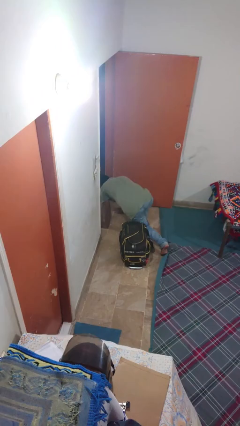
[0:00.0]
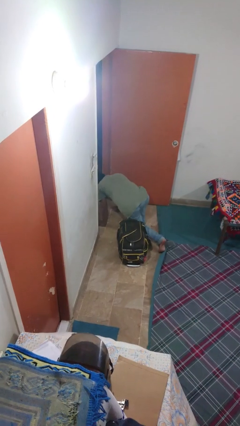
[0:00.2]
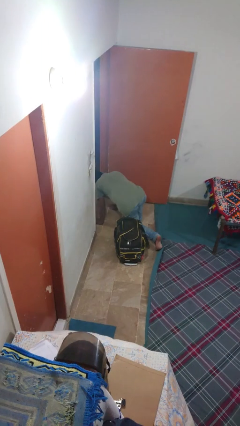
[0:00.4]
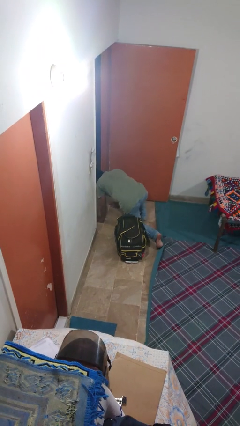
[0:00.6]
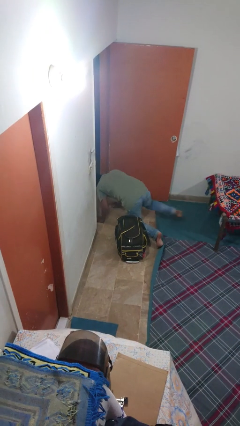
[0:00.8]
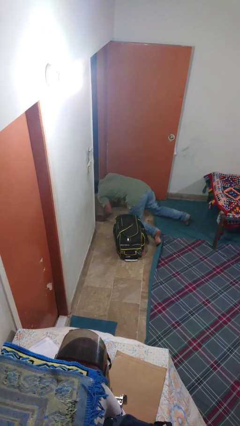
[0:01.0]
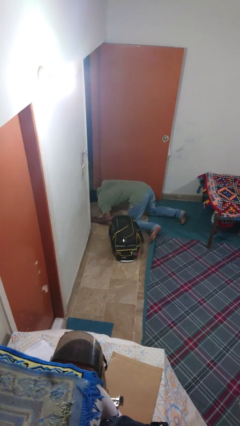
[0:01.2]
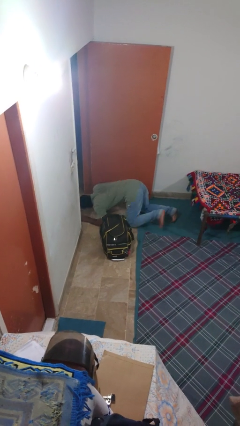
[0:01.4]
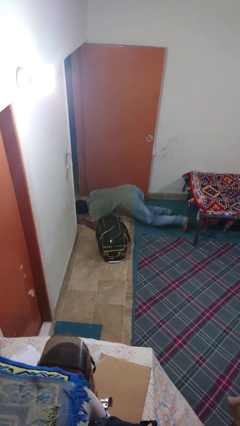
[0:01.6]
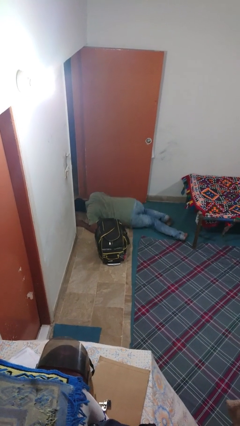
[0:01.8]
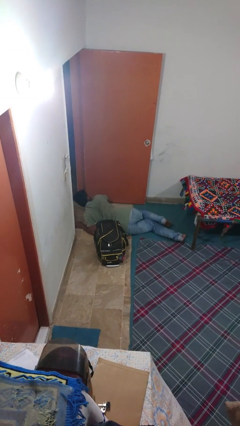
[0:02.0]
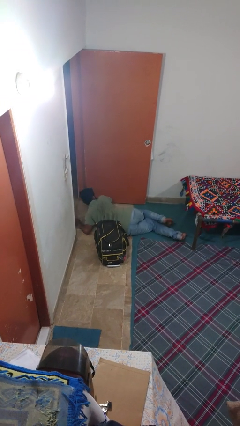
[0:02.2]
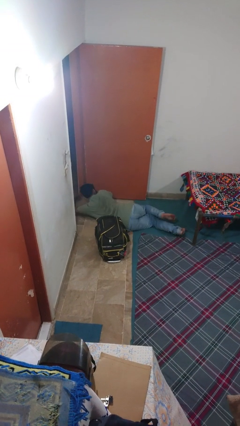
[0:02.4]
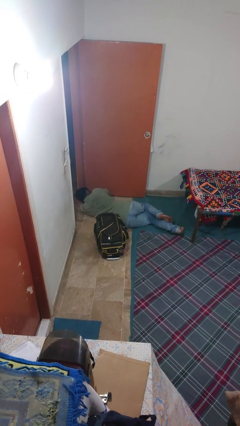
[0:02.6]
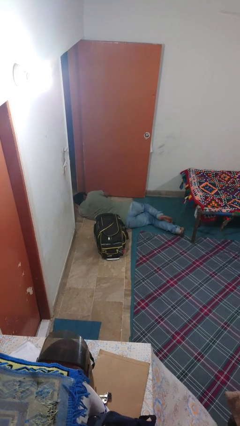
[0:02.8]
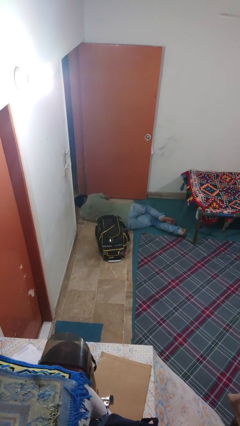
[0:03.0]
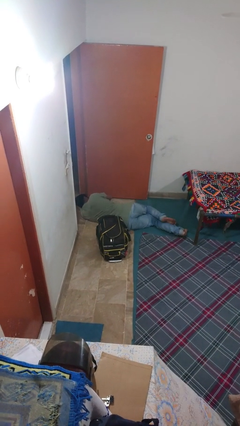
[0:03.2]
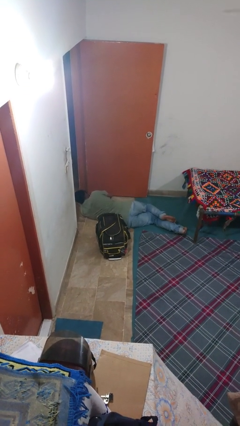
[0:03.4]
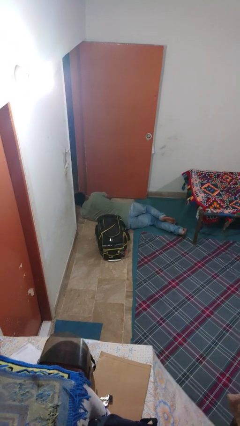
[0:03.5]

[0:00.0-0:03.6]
person lies down on floor

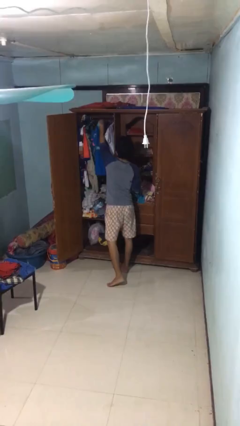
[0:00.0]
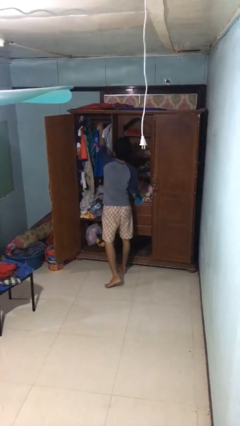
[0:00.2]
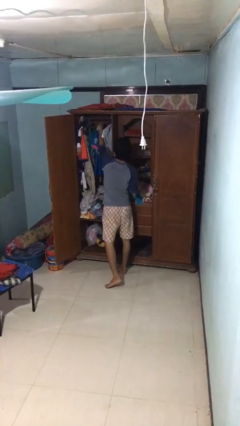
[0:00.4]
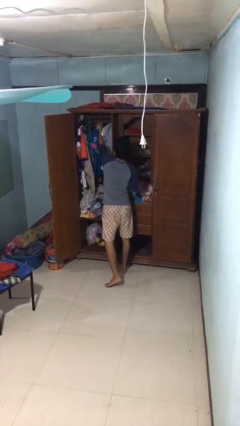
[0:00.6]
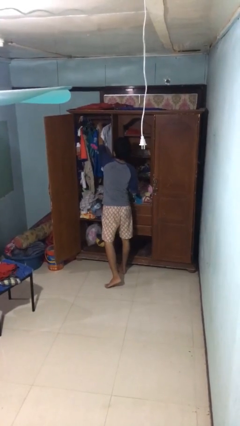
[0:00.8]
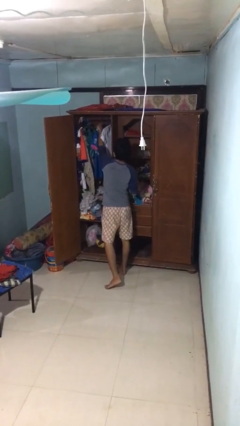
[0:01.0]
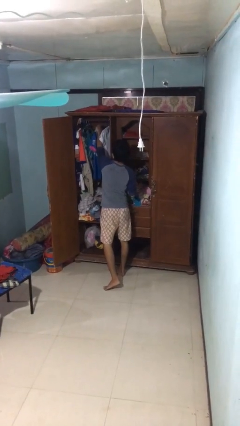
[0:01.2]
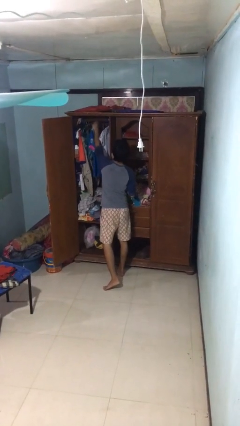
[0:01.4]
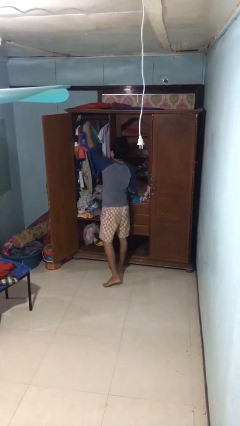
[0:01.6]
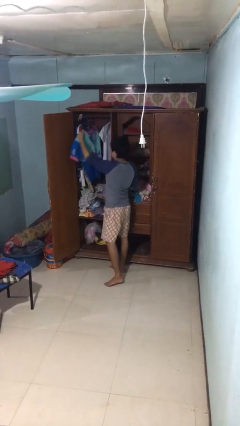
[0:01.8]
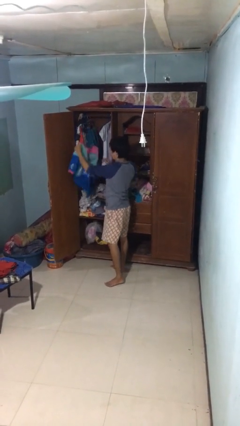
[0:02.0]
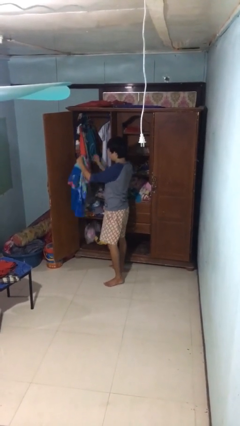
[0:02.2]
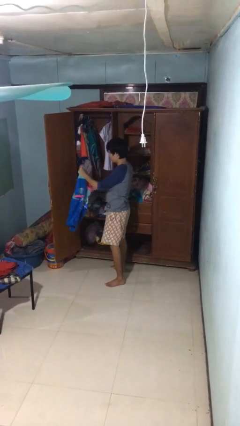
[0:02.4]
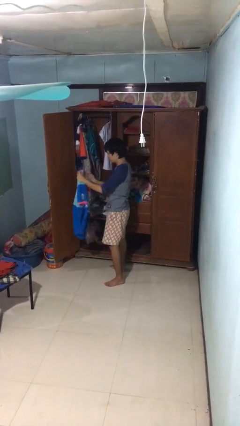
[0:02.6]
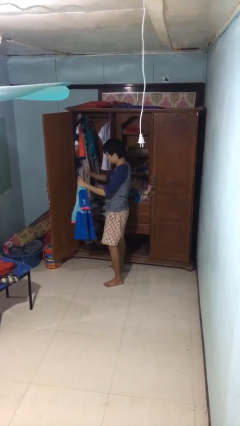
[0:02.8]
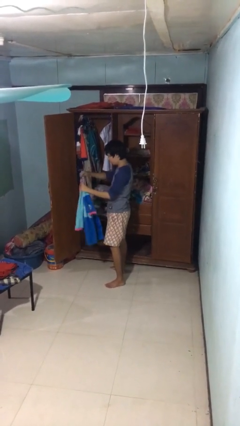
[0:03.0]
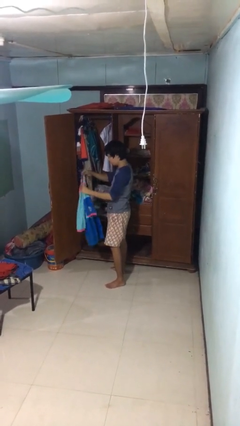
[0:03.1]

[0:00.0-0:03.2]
person takes clothes from closet

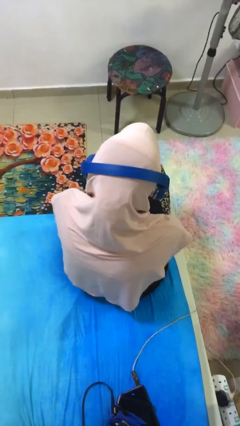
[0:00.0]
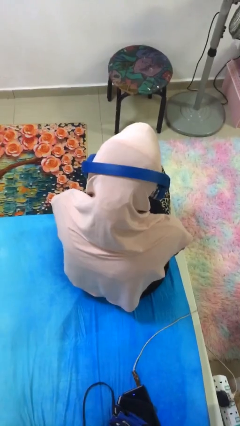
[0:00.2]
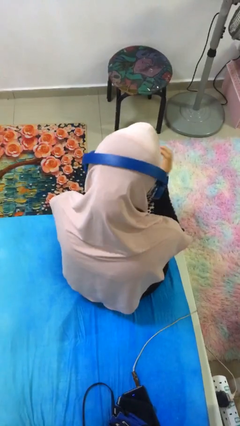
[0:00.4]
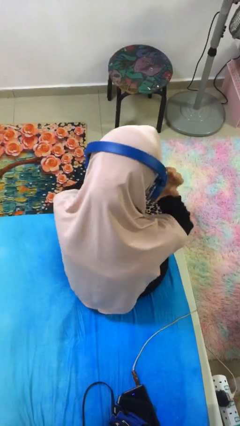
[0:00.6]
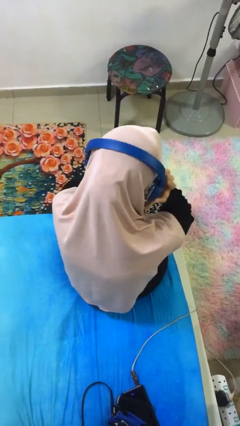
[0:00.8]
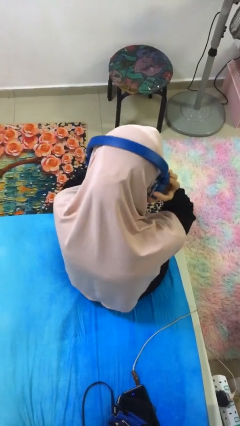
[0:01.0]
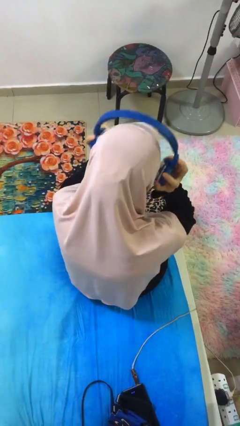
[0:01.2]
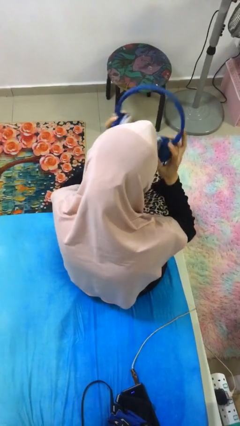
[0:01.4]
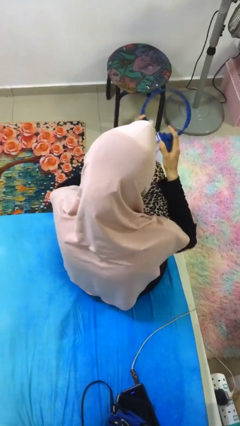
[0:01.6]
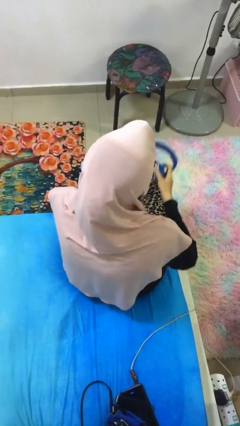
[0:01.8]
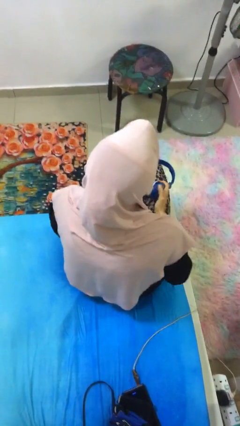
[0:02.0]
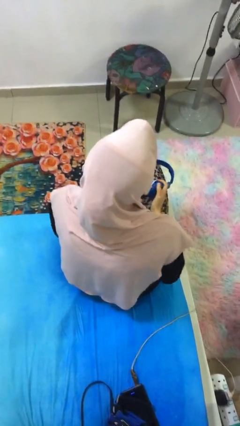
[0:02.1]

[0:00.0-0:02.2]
person takes off headphones

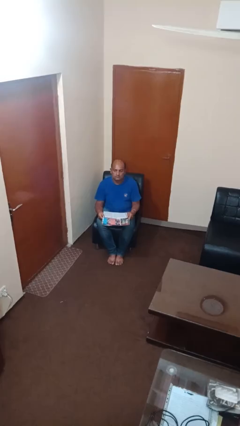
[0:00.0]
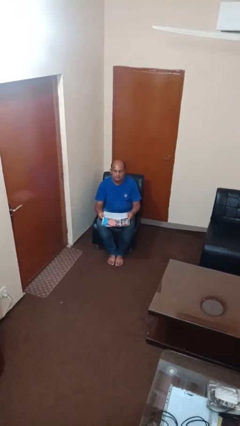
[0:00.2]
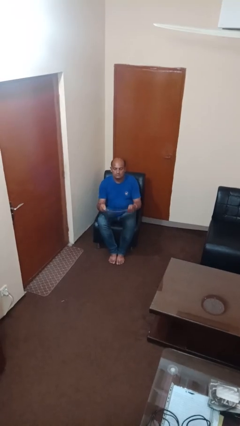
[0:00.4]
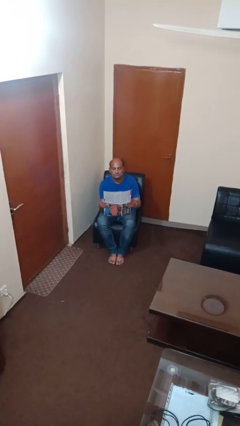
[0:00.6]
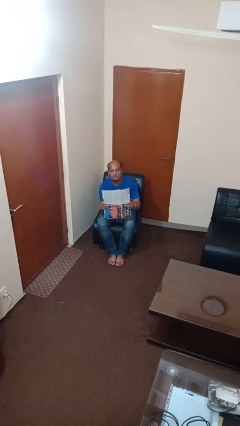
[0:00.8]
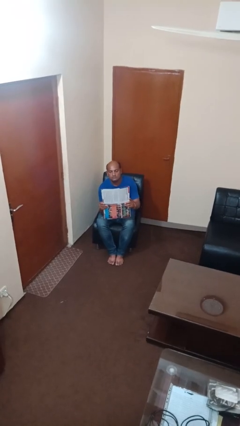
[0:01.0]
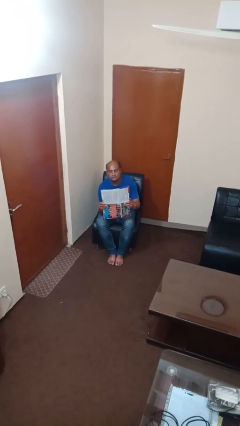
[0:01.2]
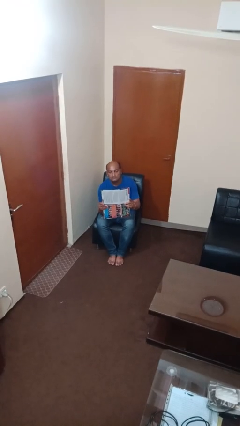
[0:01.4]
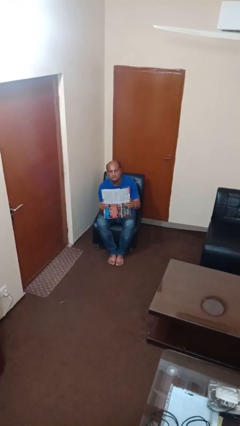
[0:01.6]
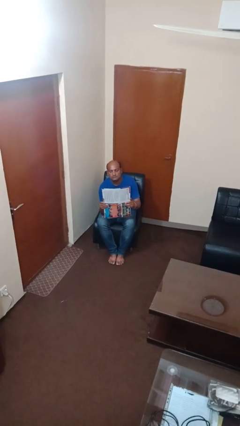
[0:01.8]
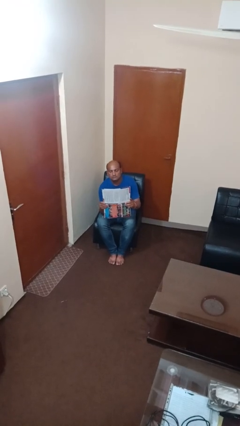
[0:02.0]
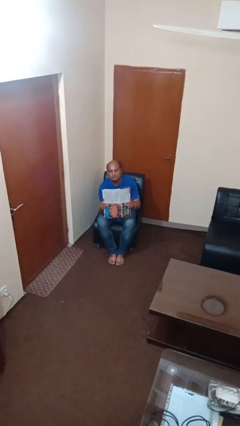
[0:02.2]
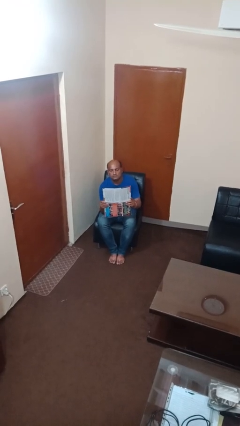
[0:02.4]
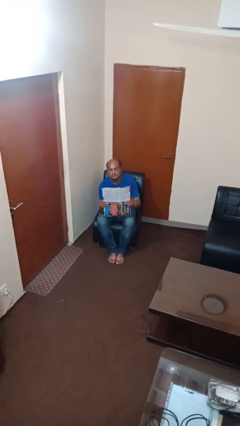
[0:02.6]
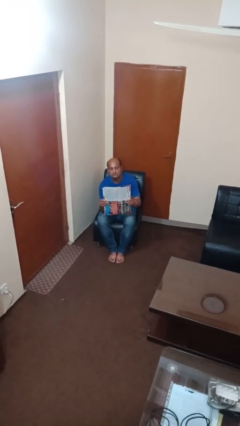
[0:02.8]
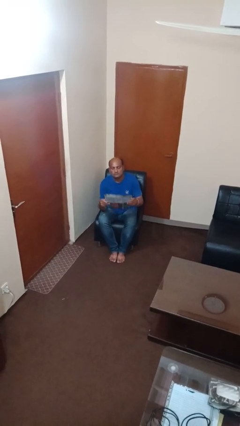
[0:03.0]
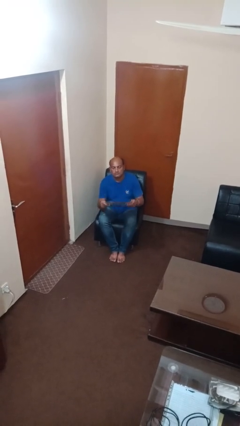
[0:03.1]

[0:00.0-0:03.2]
person reads newspaper

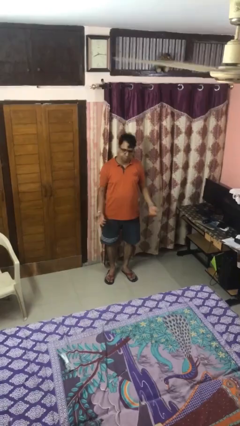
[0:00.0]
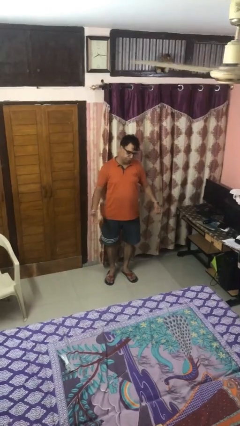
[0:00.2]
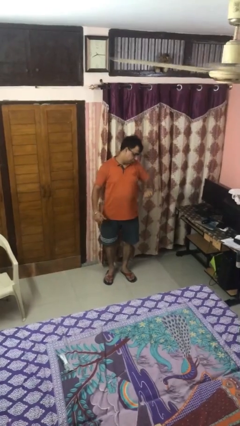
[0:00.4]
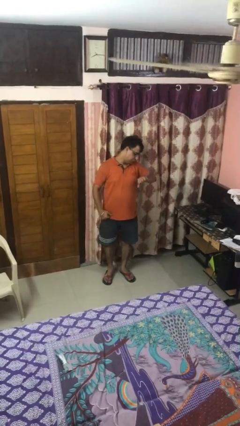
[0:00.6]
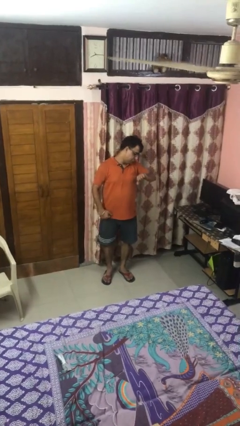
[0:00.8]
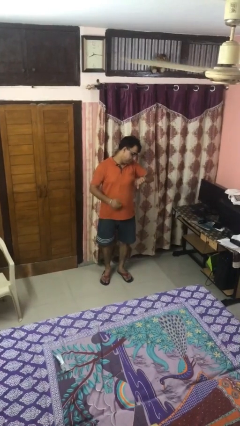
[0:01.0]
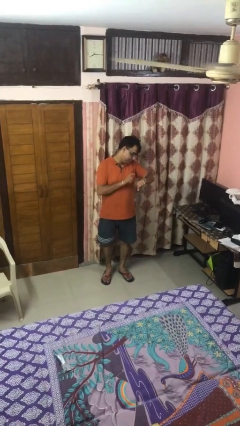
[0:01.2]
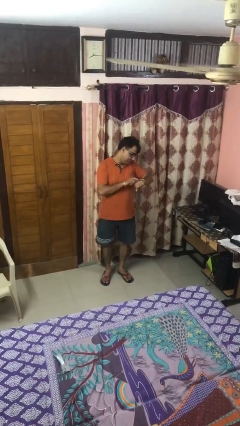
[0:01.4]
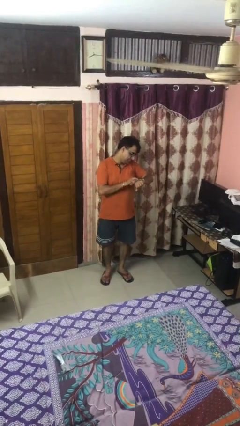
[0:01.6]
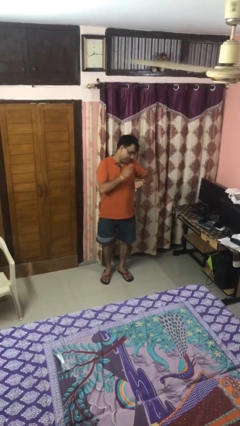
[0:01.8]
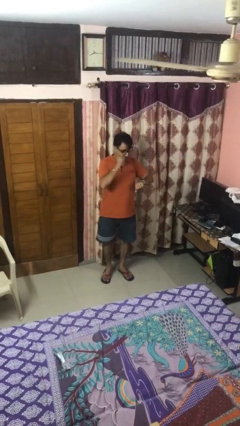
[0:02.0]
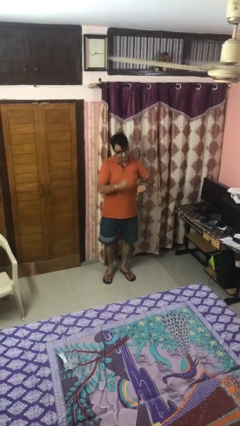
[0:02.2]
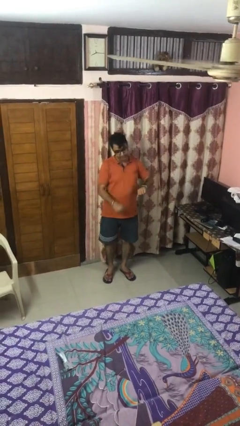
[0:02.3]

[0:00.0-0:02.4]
person looks at wristwatch

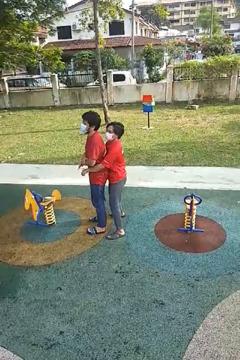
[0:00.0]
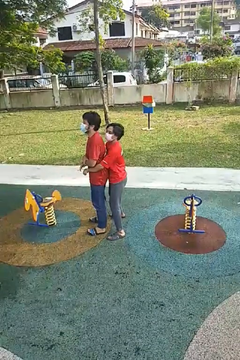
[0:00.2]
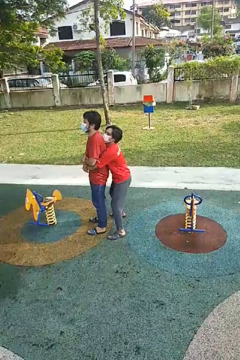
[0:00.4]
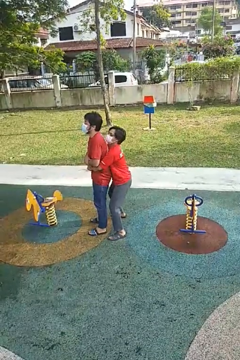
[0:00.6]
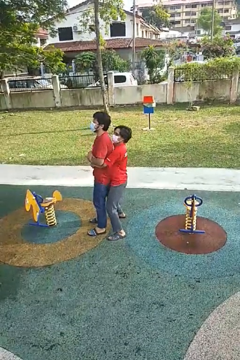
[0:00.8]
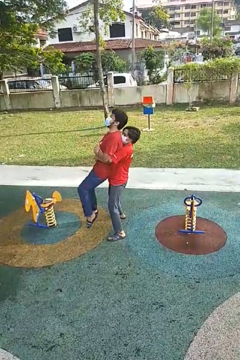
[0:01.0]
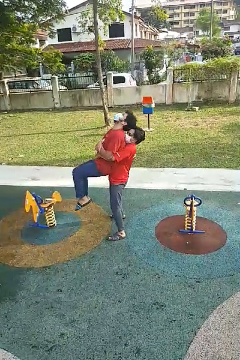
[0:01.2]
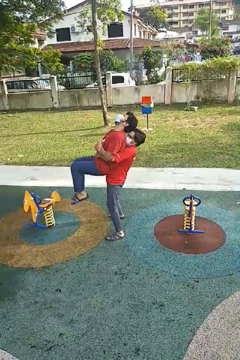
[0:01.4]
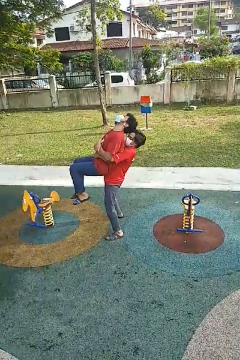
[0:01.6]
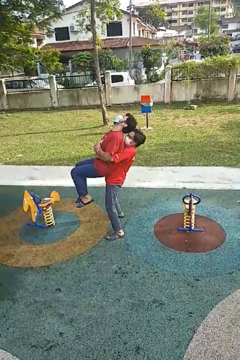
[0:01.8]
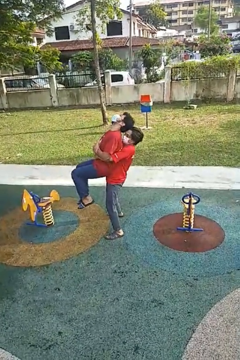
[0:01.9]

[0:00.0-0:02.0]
person picks up person

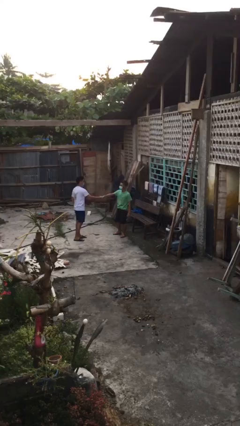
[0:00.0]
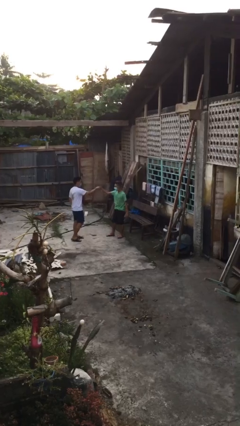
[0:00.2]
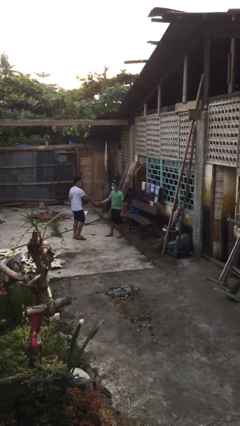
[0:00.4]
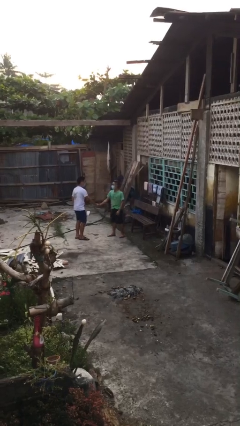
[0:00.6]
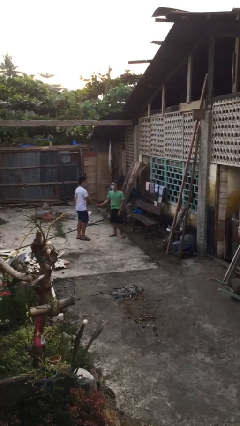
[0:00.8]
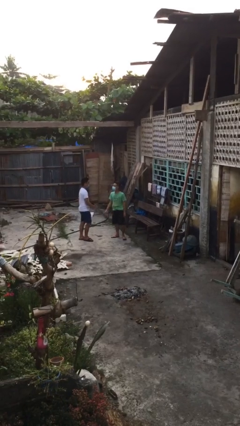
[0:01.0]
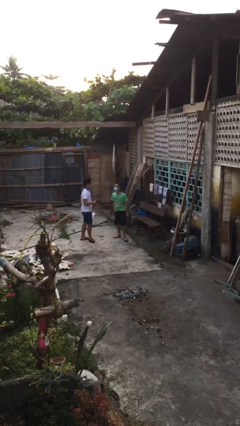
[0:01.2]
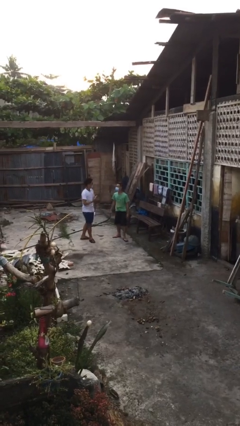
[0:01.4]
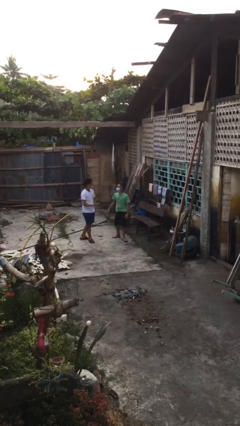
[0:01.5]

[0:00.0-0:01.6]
person shakes hand
